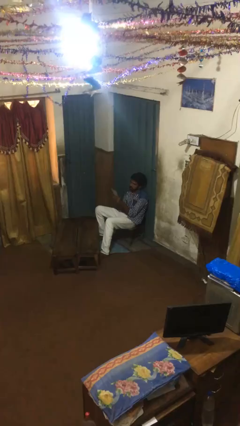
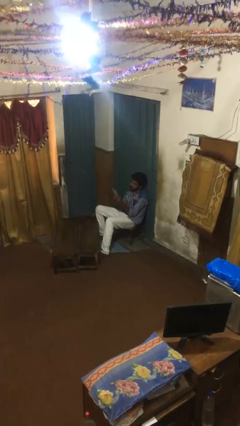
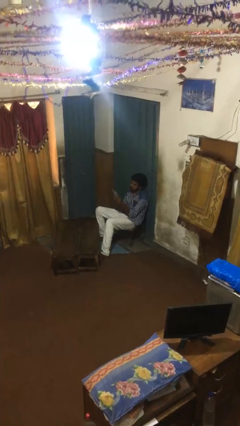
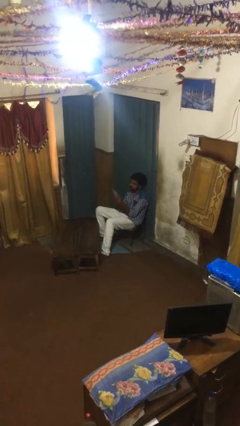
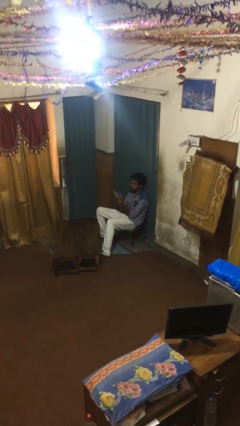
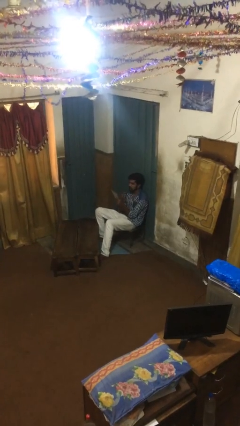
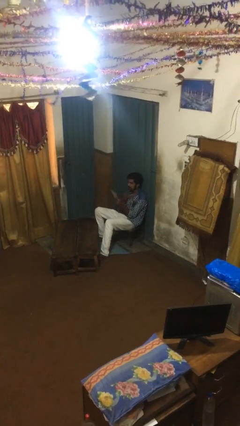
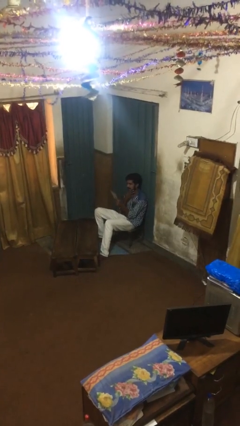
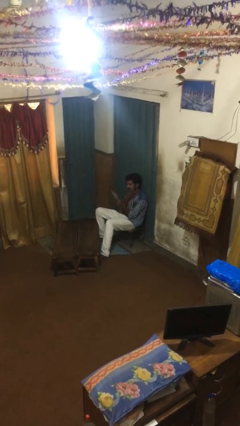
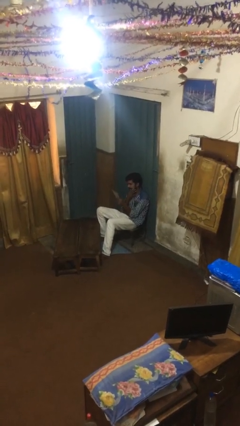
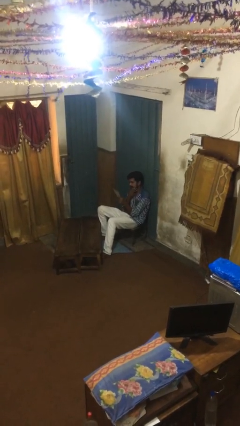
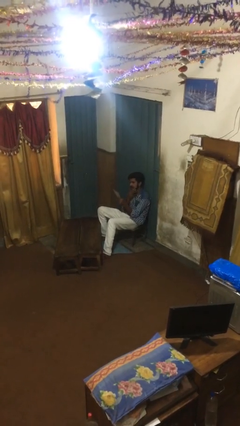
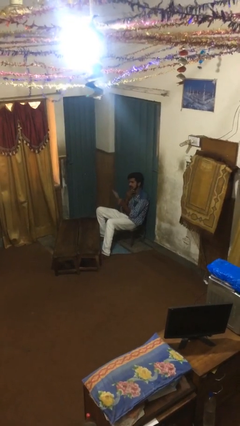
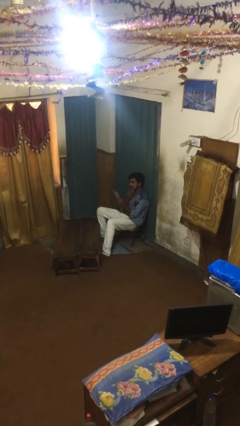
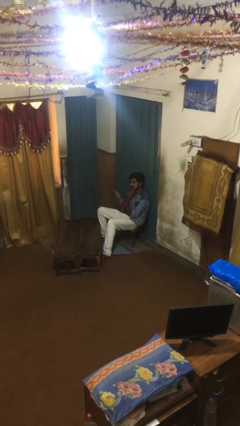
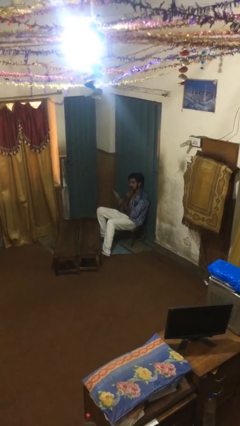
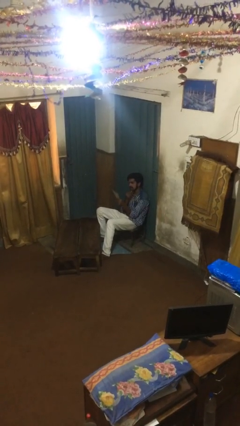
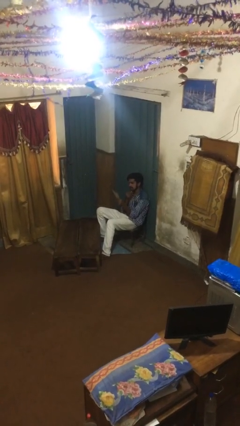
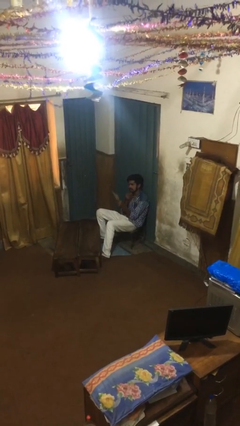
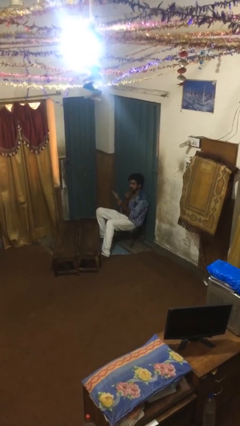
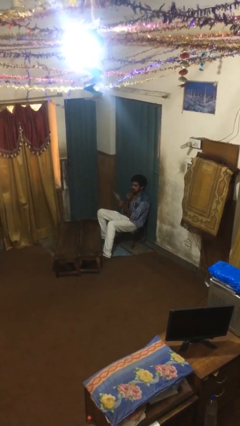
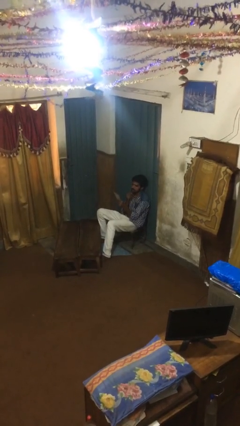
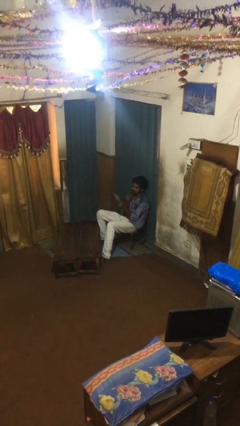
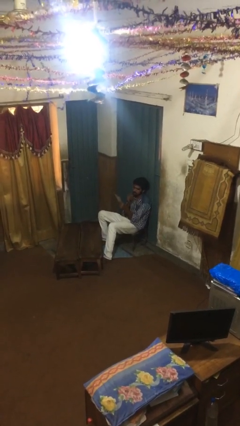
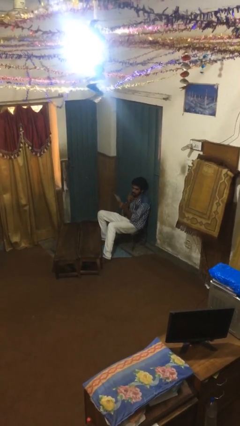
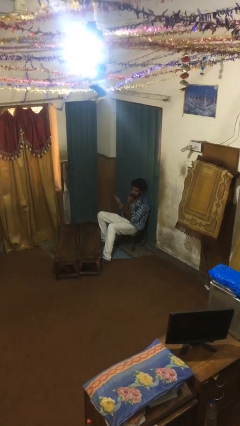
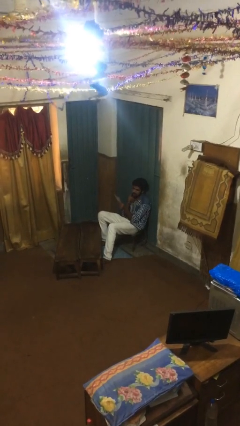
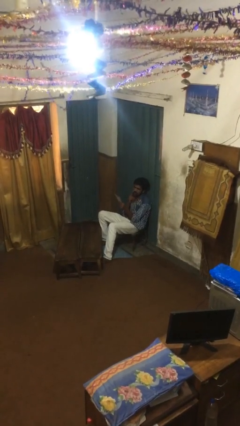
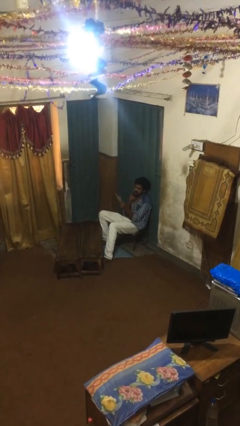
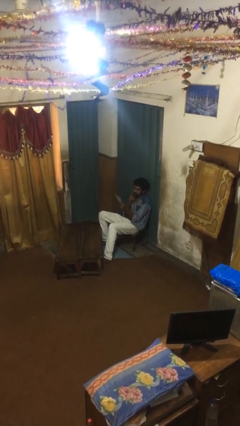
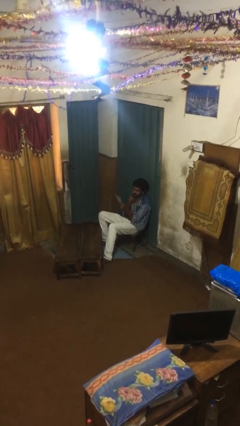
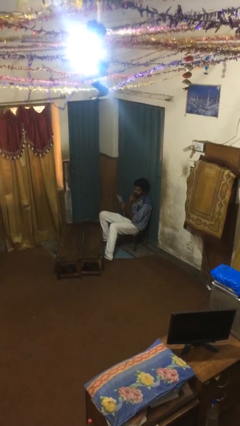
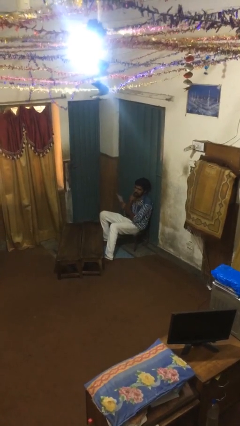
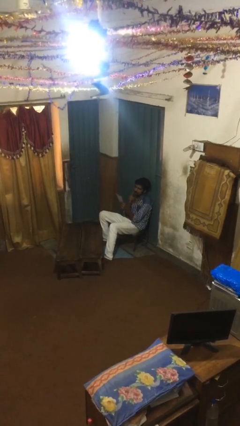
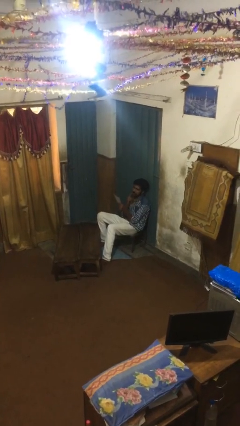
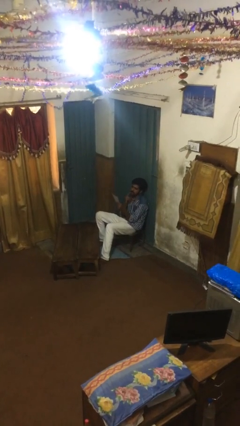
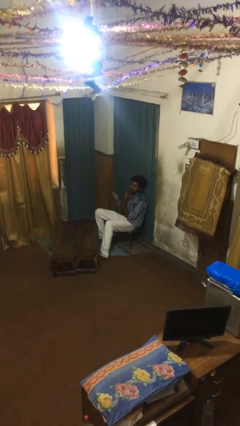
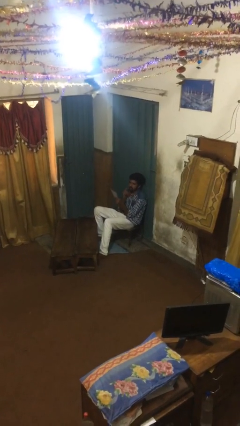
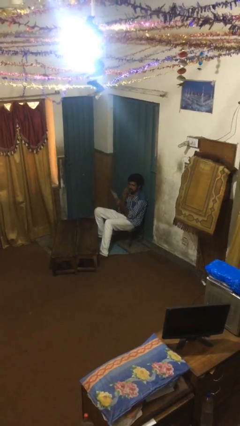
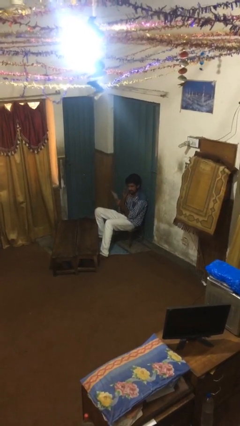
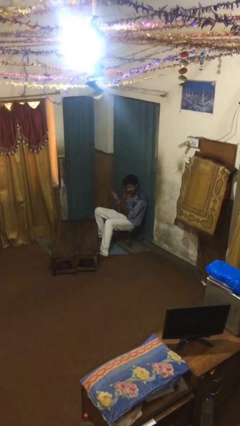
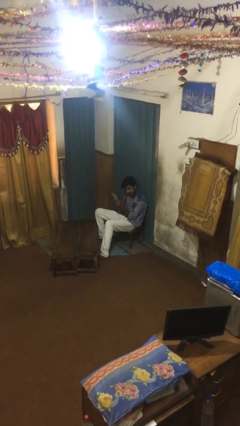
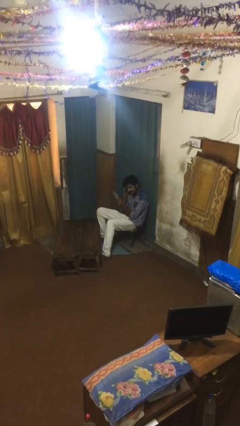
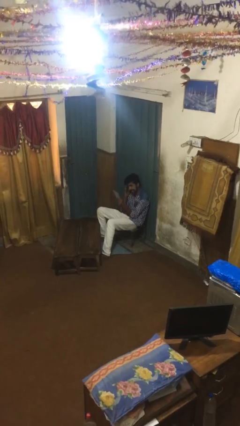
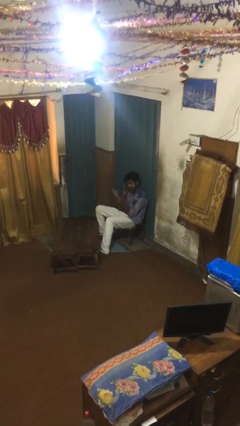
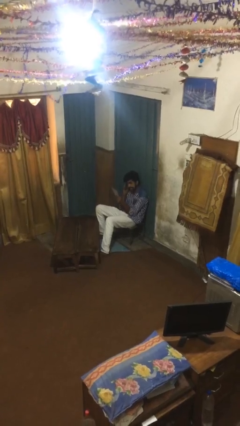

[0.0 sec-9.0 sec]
person reads document

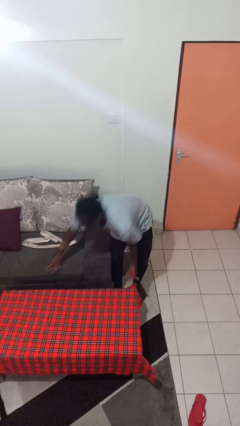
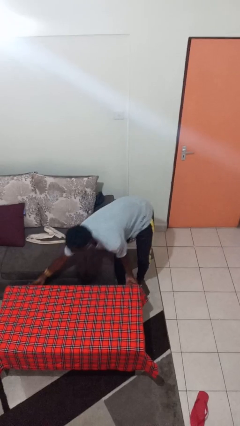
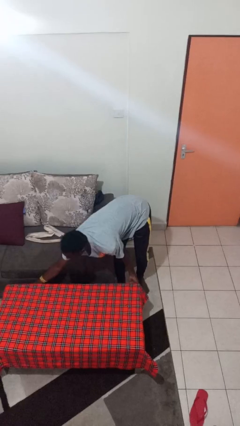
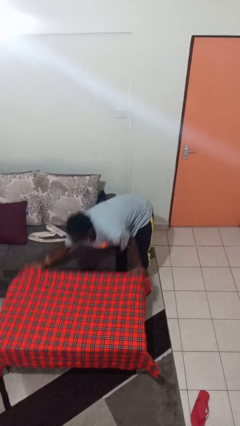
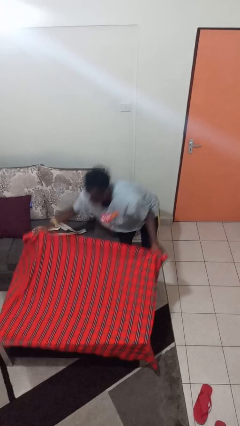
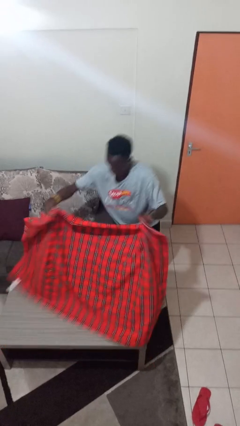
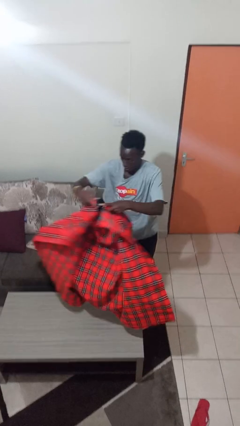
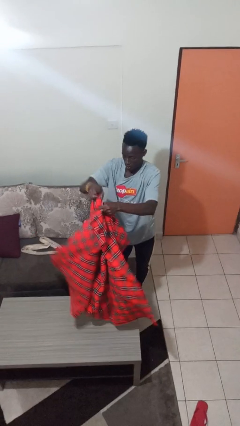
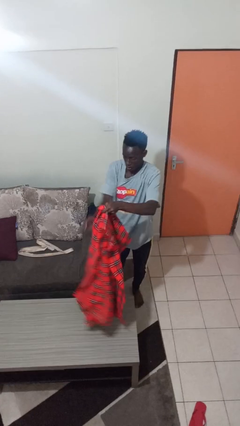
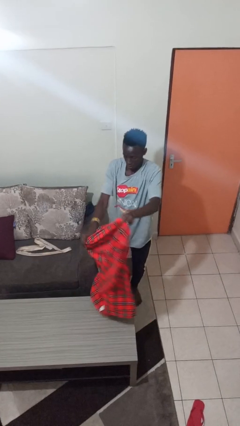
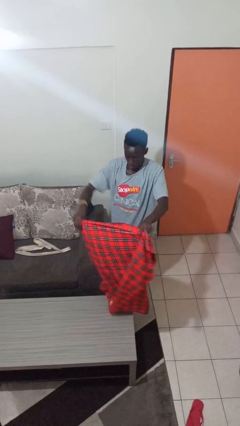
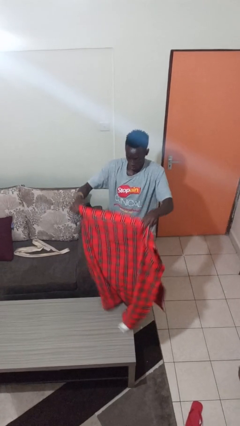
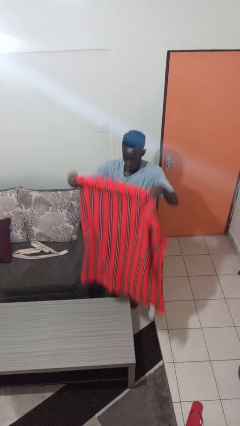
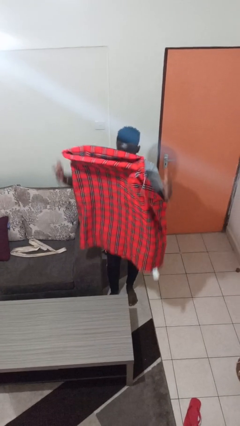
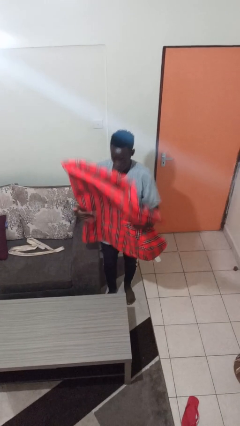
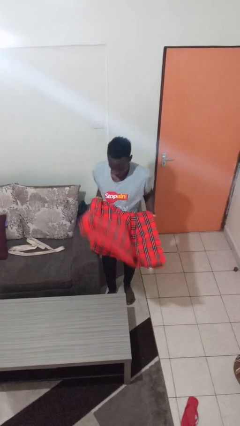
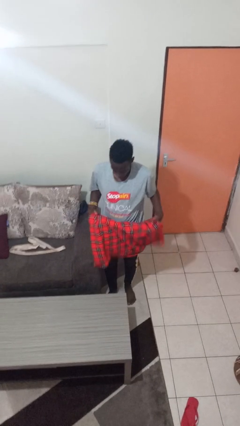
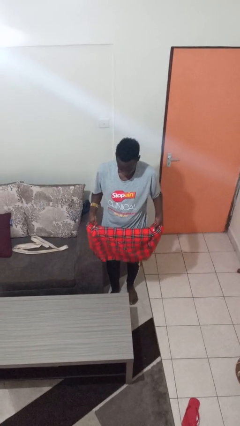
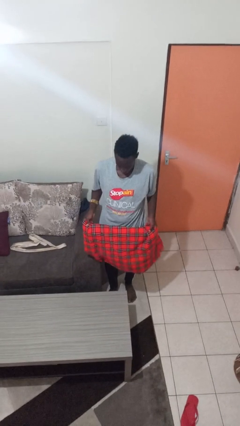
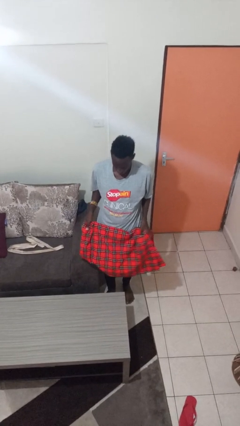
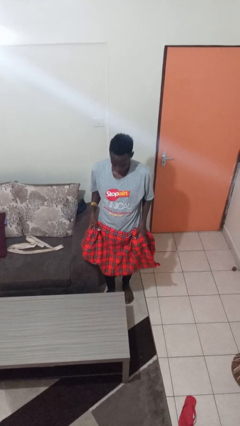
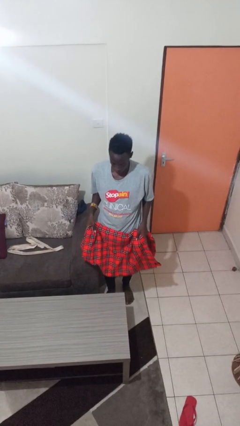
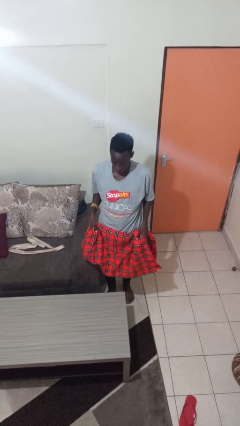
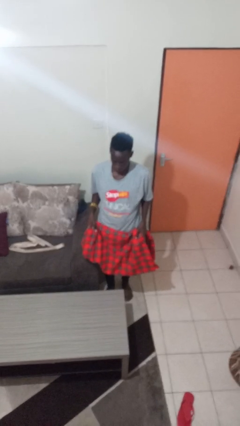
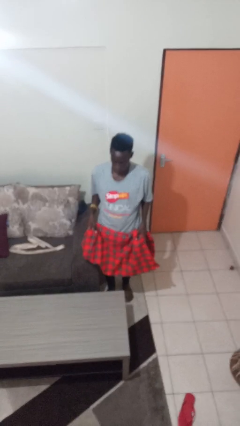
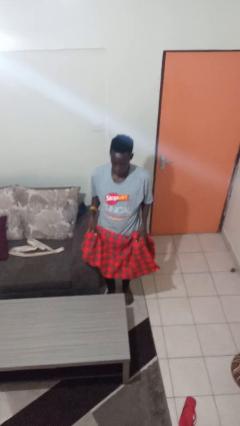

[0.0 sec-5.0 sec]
person folds tablecloth

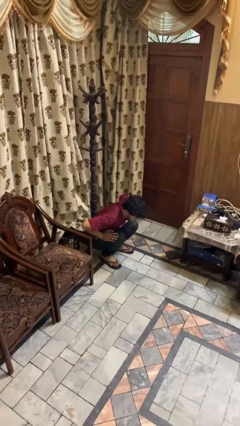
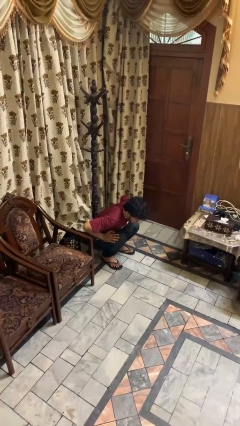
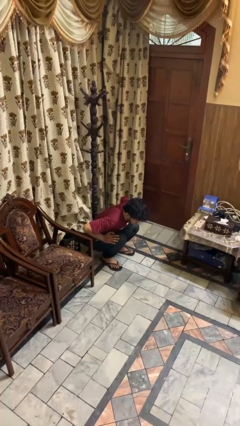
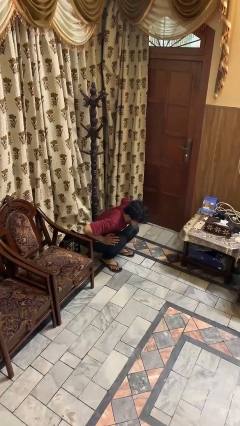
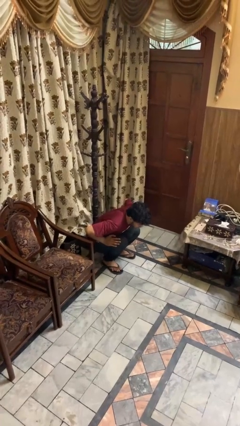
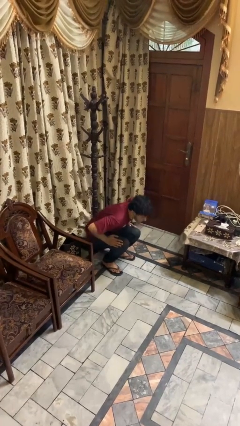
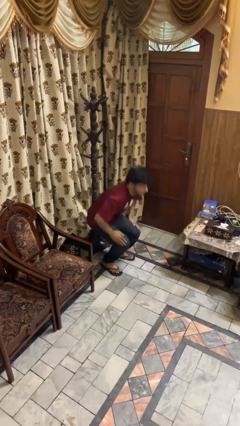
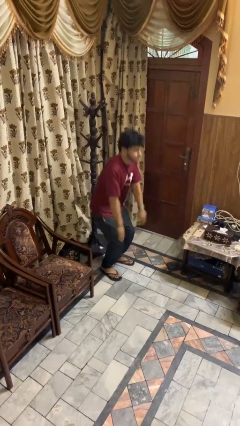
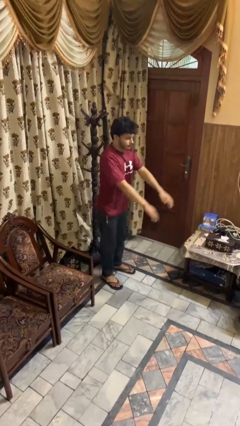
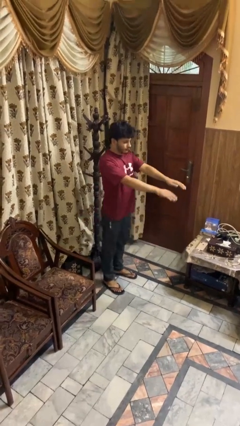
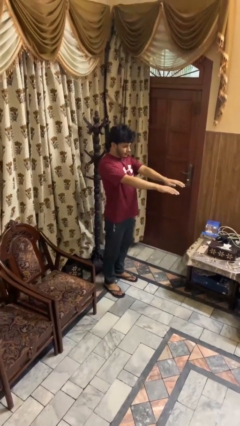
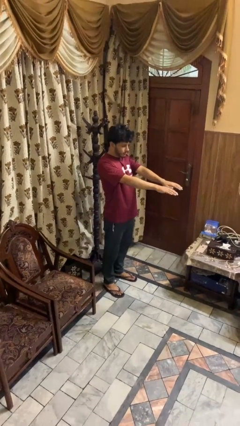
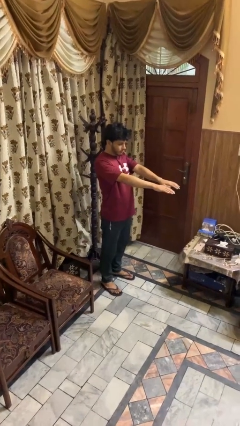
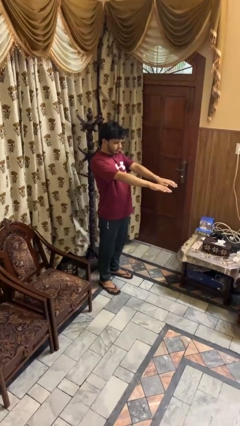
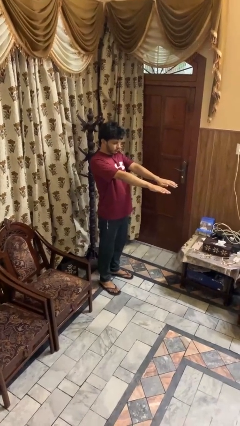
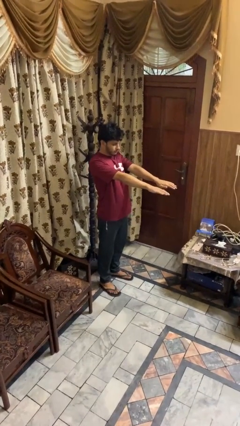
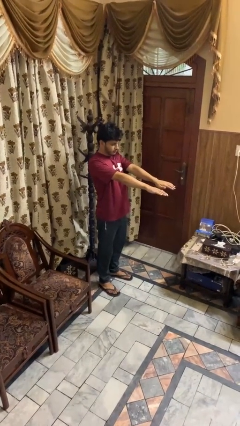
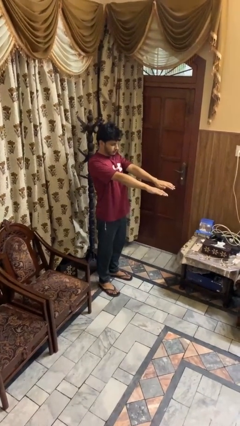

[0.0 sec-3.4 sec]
person stands up

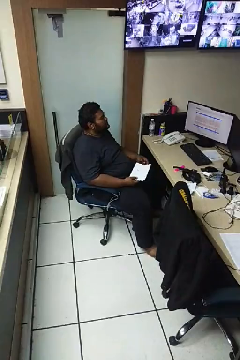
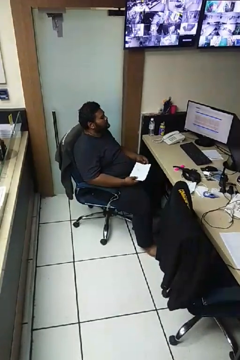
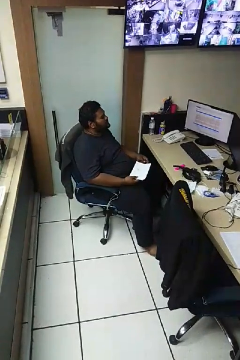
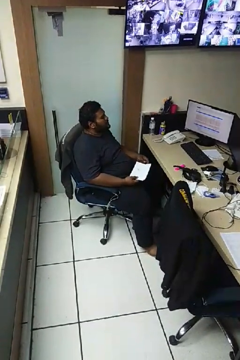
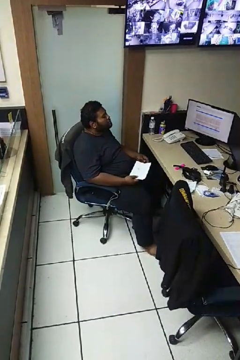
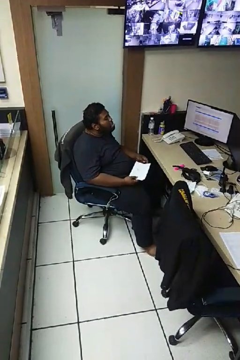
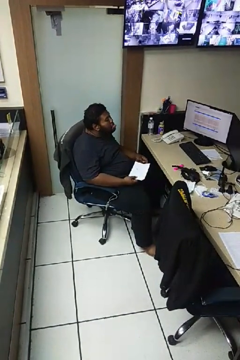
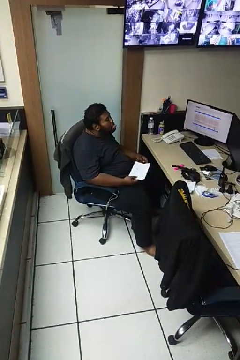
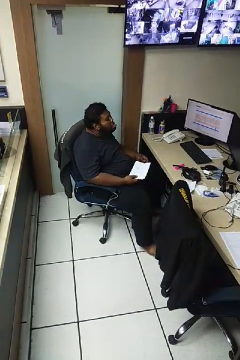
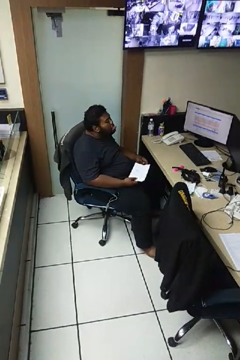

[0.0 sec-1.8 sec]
person sticks out tongue
